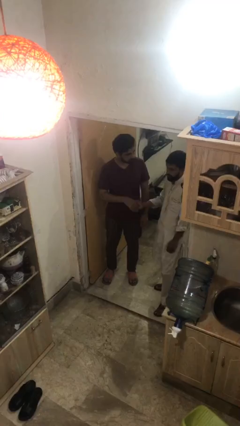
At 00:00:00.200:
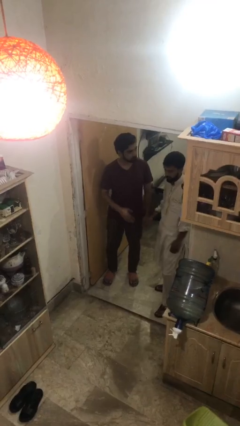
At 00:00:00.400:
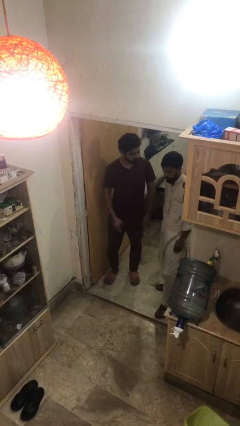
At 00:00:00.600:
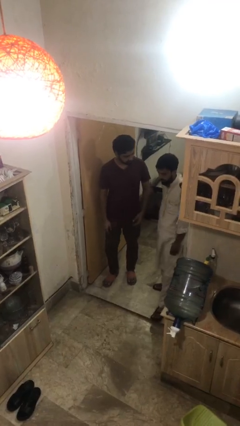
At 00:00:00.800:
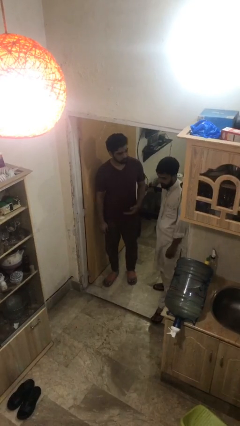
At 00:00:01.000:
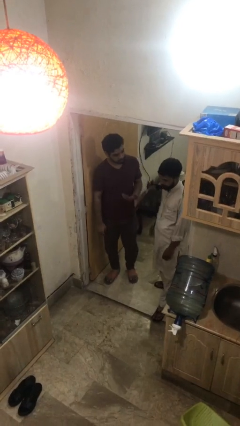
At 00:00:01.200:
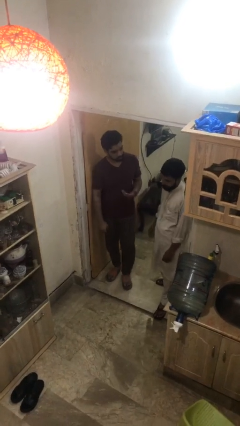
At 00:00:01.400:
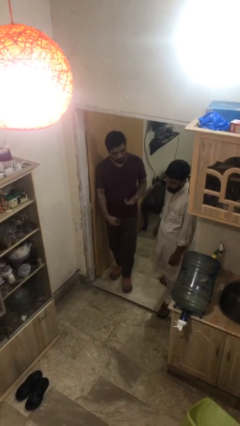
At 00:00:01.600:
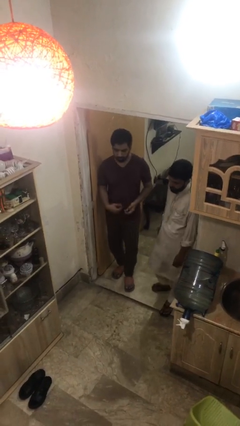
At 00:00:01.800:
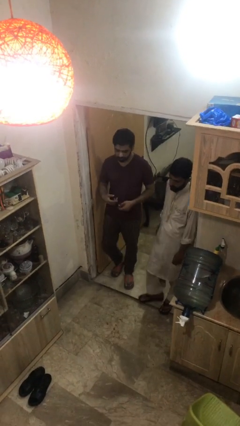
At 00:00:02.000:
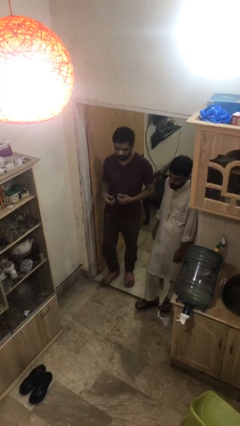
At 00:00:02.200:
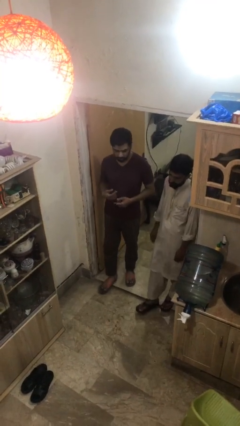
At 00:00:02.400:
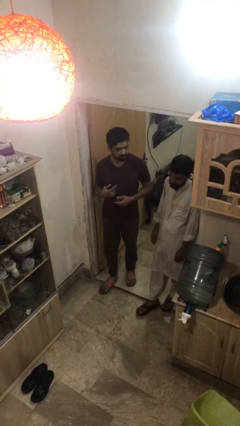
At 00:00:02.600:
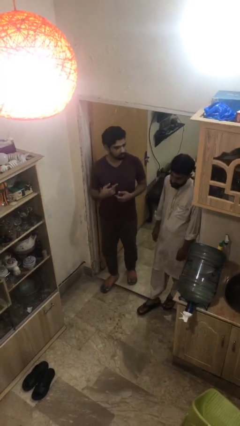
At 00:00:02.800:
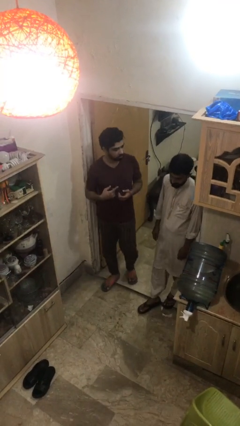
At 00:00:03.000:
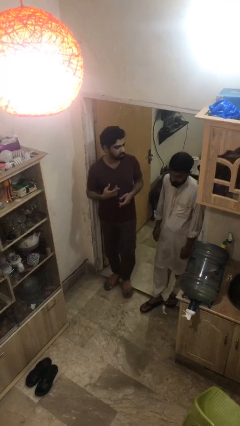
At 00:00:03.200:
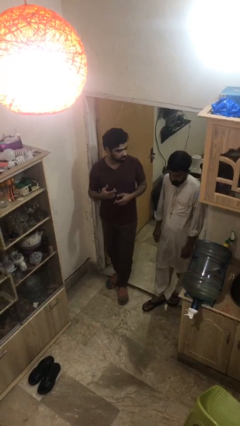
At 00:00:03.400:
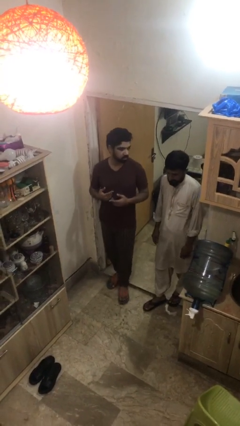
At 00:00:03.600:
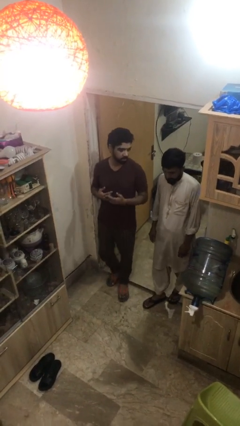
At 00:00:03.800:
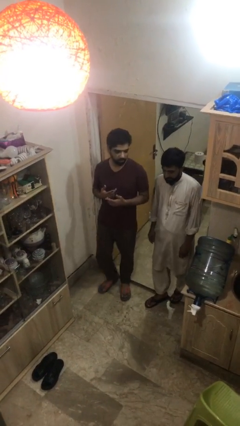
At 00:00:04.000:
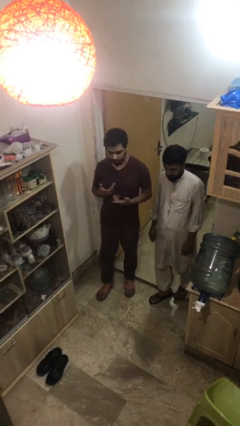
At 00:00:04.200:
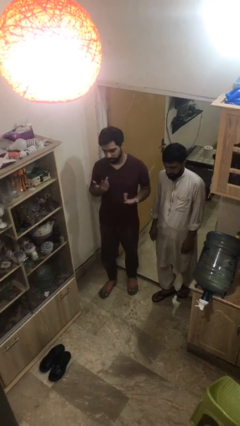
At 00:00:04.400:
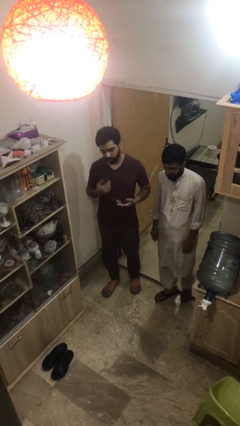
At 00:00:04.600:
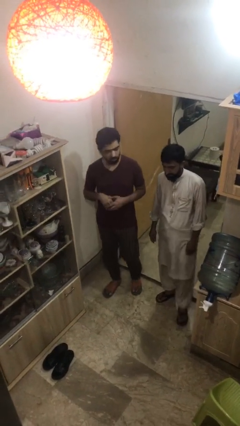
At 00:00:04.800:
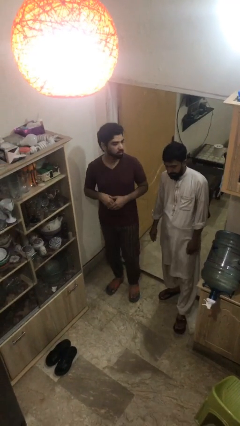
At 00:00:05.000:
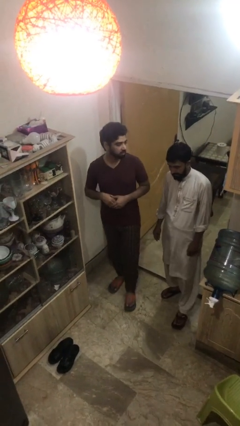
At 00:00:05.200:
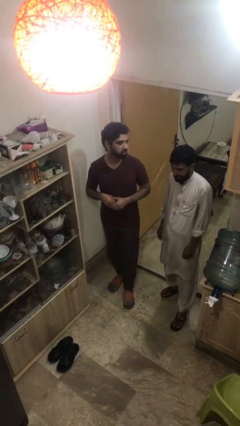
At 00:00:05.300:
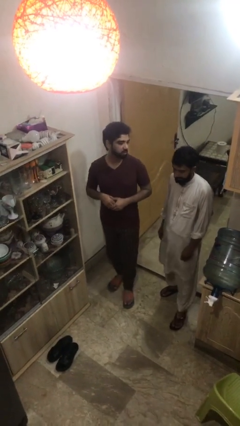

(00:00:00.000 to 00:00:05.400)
person talks to person

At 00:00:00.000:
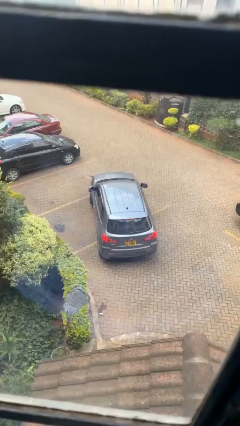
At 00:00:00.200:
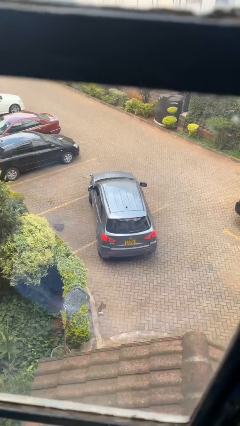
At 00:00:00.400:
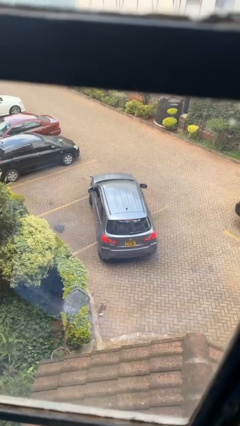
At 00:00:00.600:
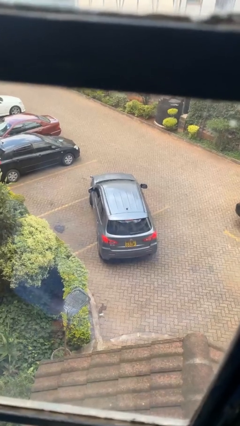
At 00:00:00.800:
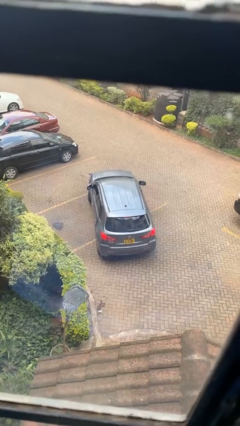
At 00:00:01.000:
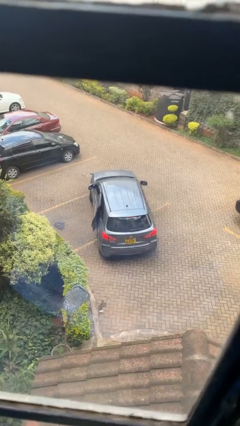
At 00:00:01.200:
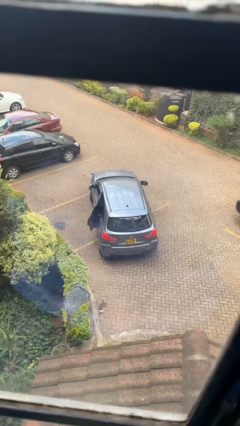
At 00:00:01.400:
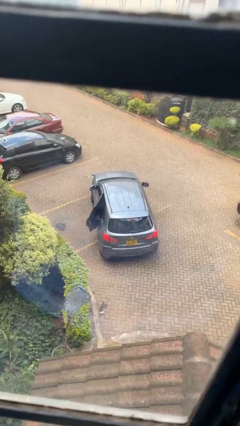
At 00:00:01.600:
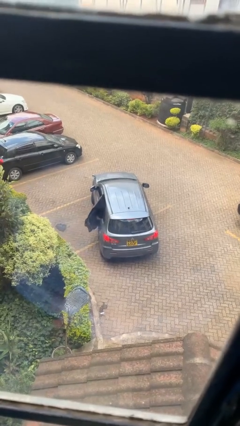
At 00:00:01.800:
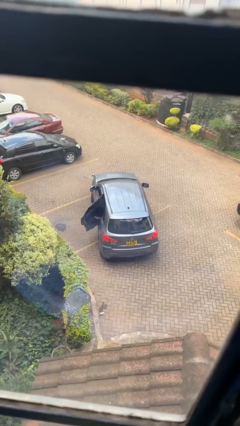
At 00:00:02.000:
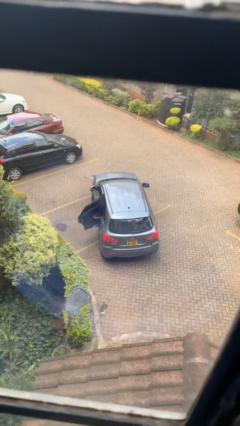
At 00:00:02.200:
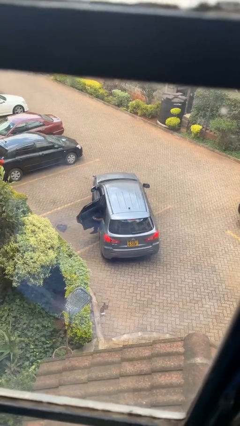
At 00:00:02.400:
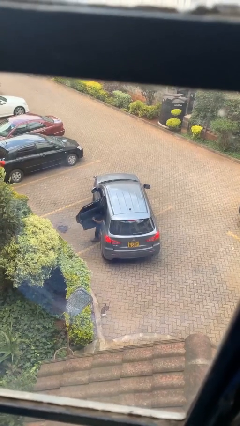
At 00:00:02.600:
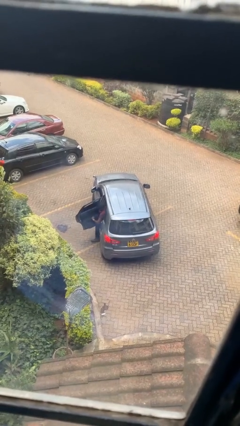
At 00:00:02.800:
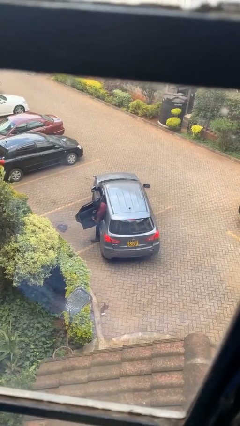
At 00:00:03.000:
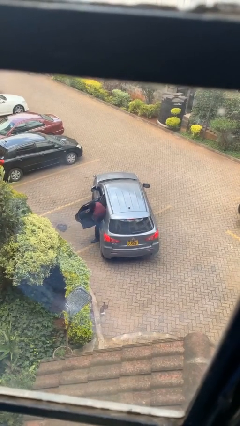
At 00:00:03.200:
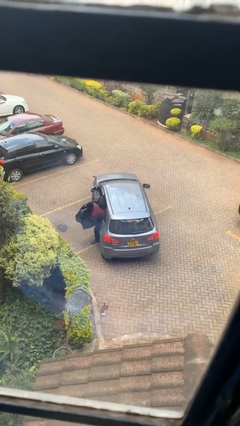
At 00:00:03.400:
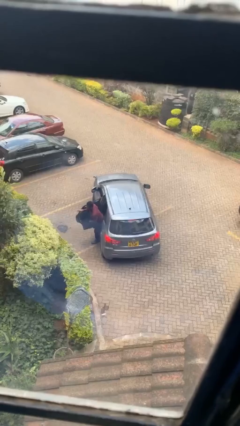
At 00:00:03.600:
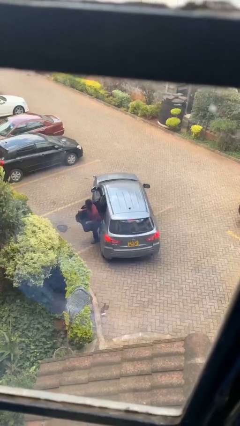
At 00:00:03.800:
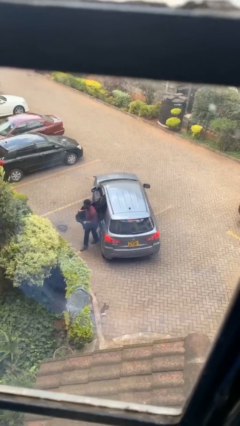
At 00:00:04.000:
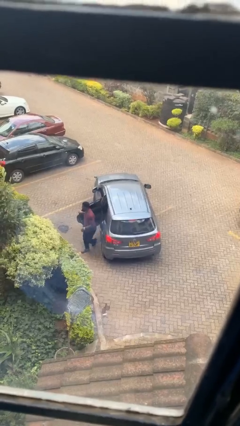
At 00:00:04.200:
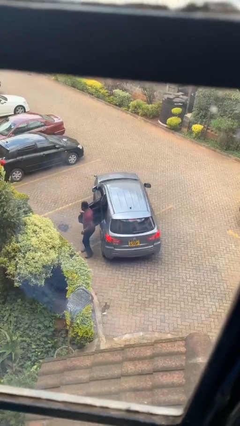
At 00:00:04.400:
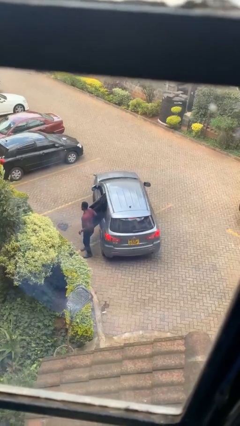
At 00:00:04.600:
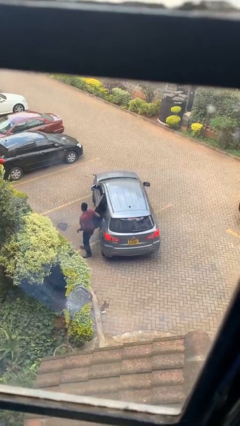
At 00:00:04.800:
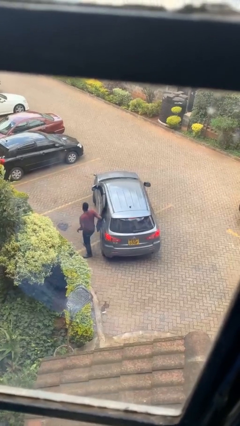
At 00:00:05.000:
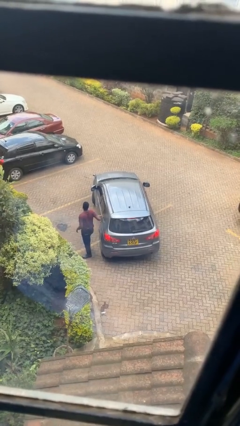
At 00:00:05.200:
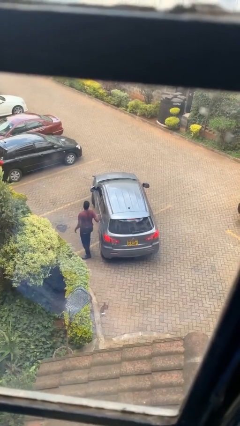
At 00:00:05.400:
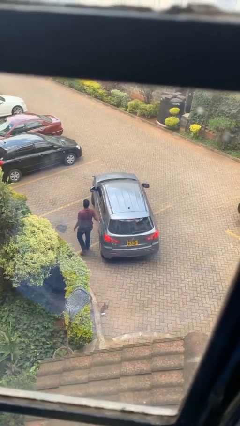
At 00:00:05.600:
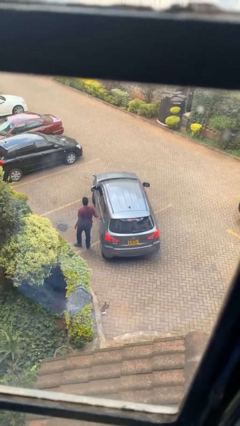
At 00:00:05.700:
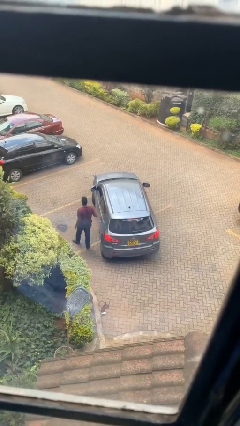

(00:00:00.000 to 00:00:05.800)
car drops off person

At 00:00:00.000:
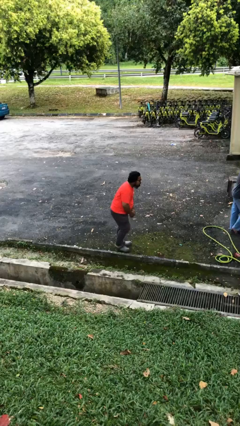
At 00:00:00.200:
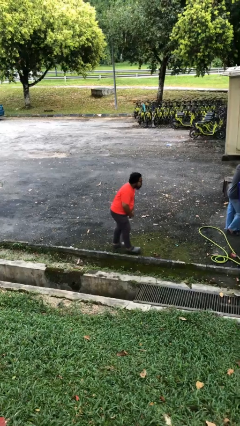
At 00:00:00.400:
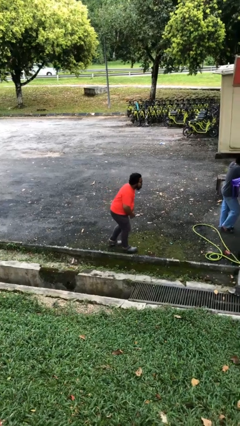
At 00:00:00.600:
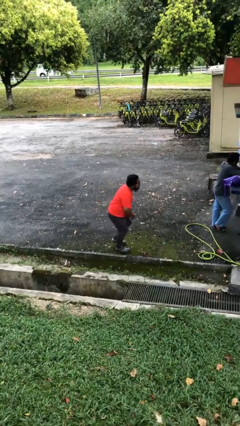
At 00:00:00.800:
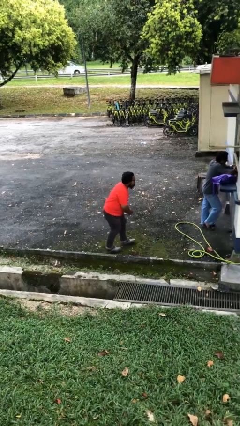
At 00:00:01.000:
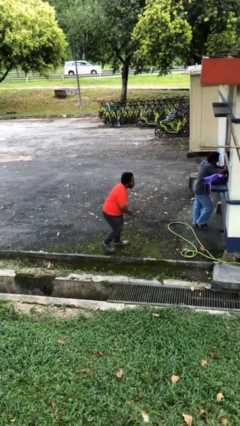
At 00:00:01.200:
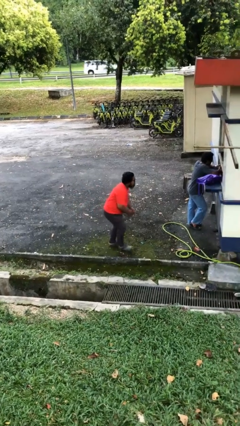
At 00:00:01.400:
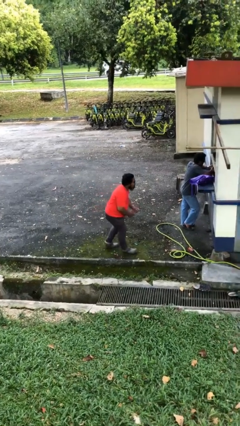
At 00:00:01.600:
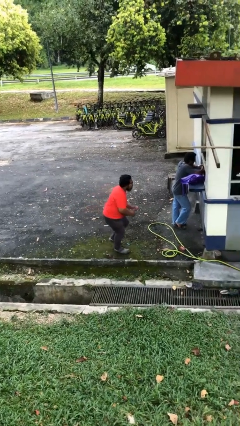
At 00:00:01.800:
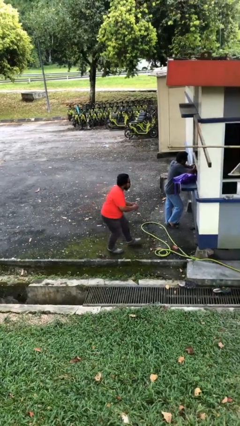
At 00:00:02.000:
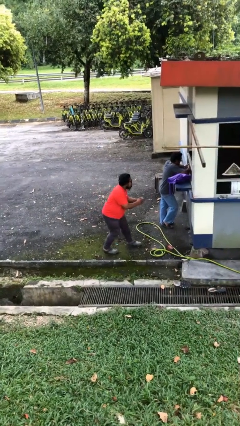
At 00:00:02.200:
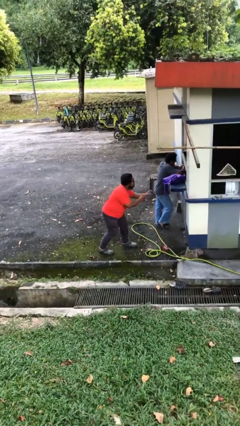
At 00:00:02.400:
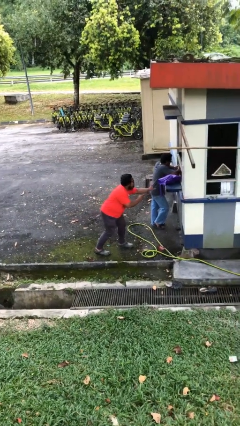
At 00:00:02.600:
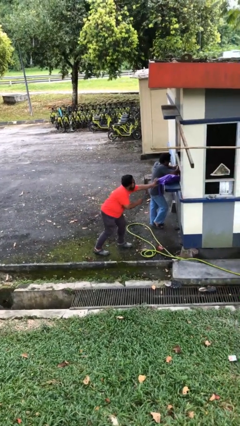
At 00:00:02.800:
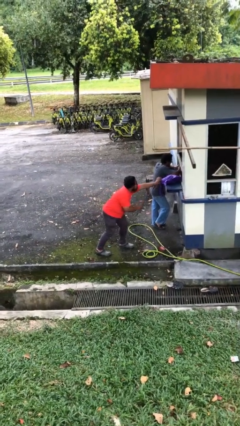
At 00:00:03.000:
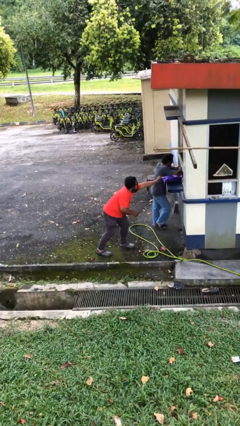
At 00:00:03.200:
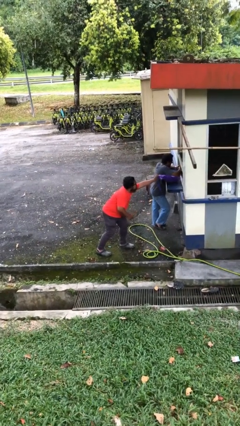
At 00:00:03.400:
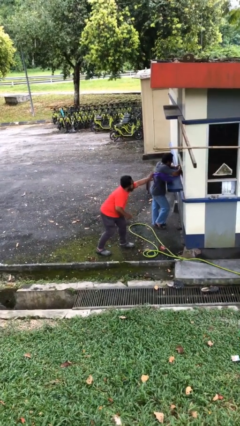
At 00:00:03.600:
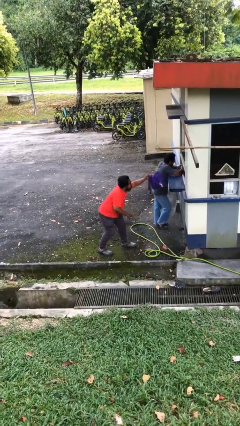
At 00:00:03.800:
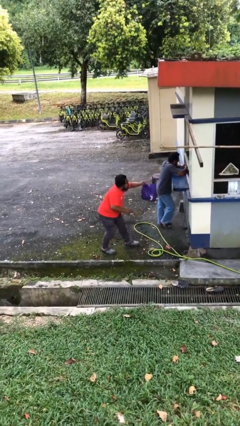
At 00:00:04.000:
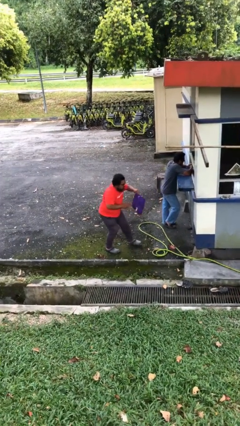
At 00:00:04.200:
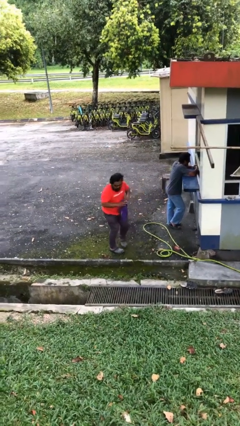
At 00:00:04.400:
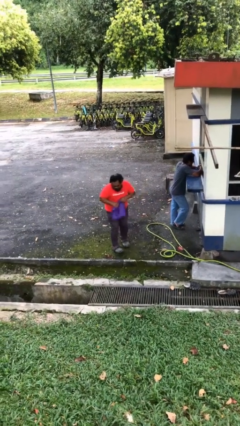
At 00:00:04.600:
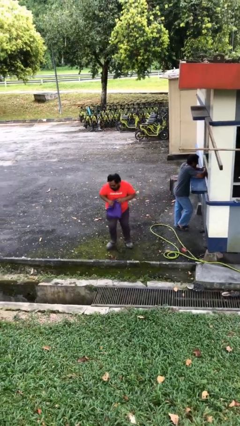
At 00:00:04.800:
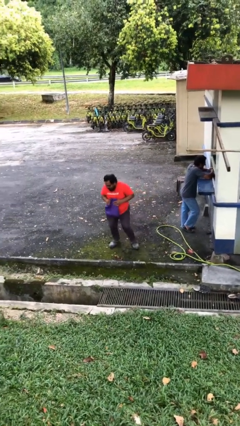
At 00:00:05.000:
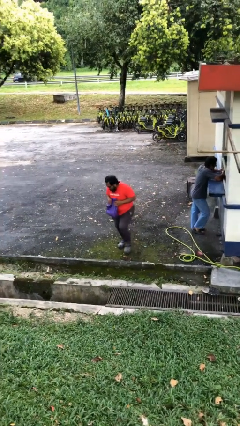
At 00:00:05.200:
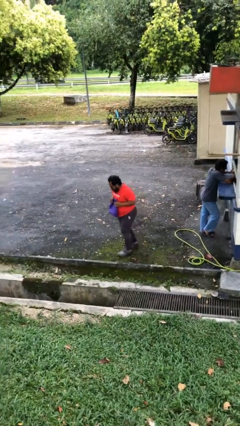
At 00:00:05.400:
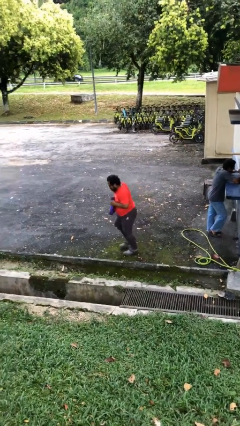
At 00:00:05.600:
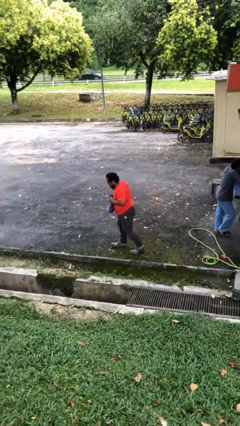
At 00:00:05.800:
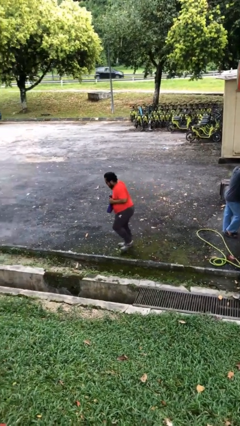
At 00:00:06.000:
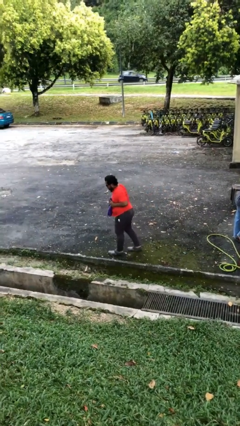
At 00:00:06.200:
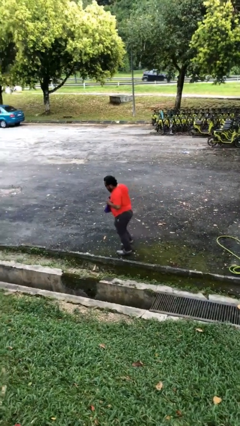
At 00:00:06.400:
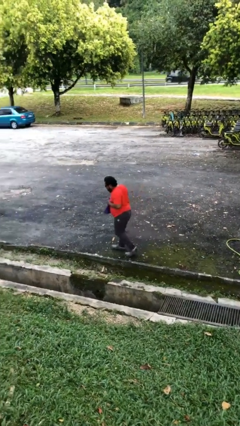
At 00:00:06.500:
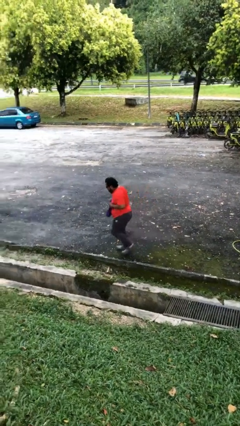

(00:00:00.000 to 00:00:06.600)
person steals object from person
